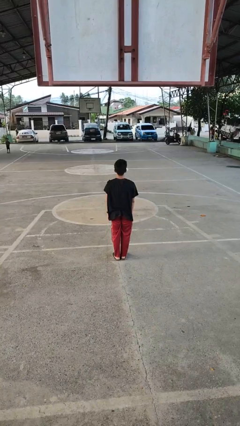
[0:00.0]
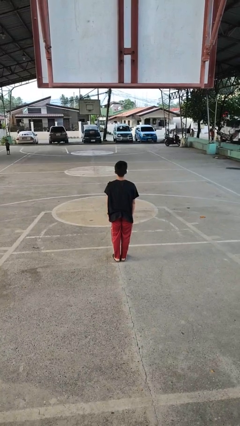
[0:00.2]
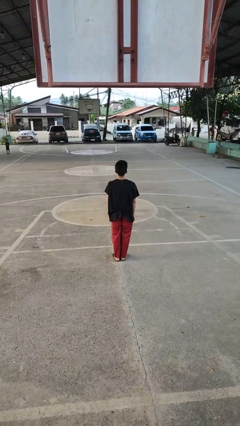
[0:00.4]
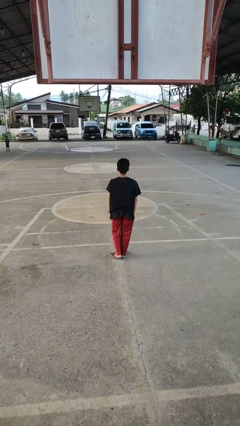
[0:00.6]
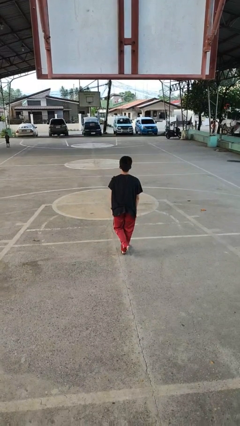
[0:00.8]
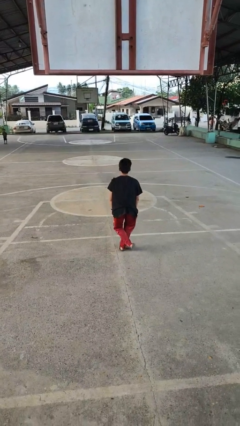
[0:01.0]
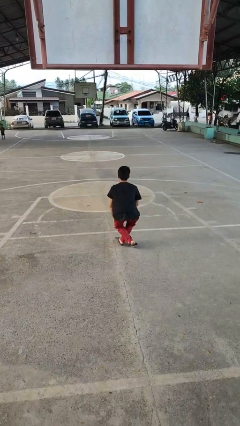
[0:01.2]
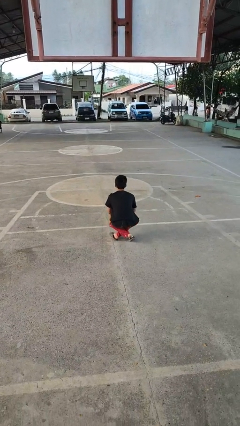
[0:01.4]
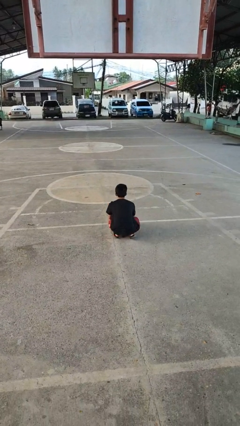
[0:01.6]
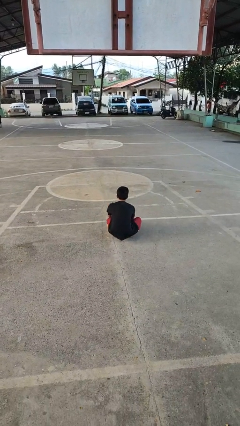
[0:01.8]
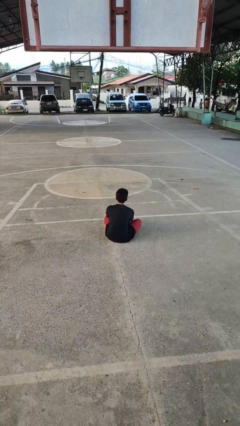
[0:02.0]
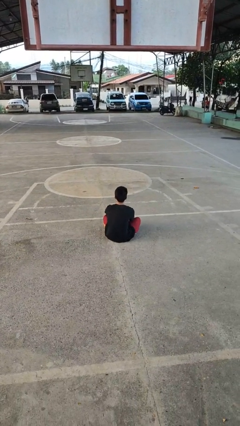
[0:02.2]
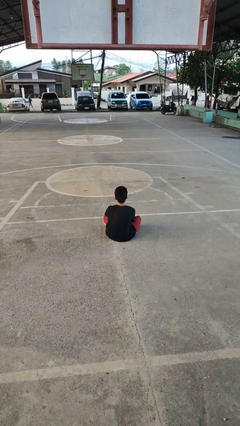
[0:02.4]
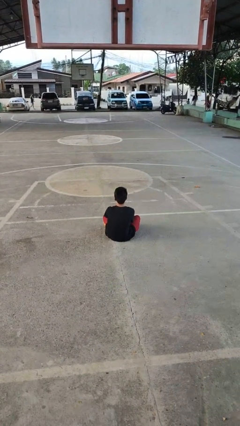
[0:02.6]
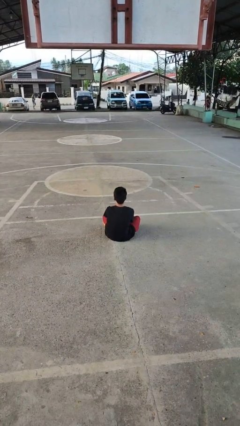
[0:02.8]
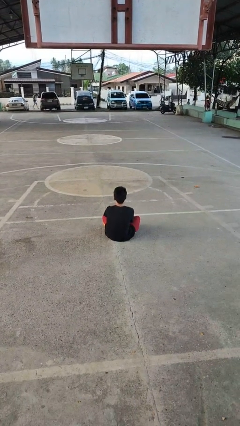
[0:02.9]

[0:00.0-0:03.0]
person sits crisscross

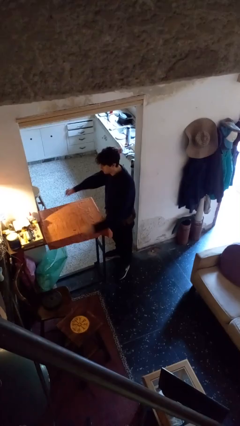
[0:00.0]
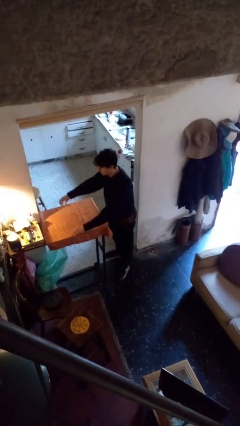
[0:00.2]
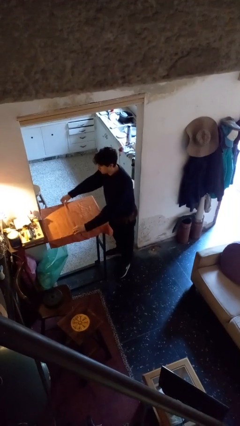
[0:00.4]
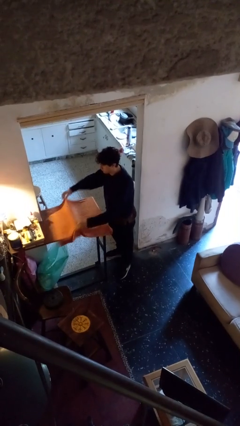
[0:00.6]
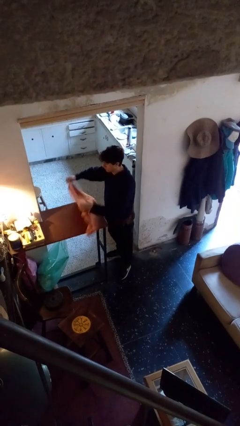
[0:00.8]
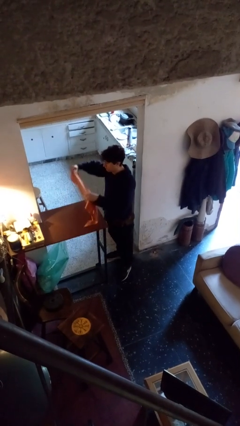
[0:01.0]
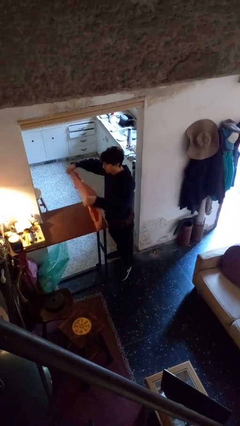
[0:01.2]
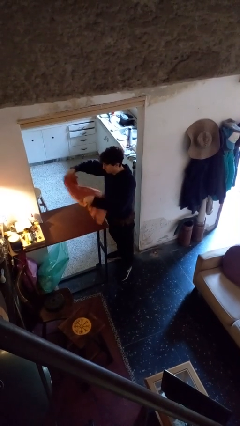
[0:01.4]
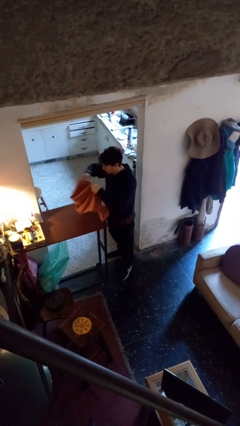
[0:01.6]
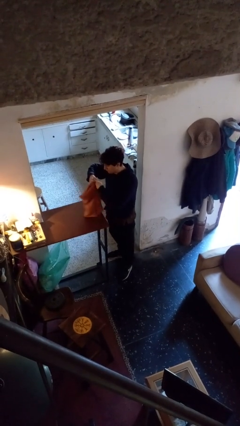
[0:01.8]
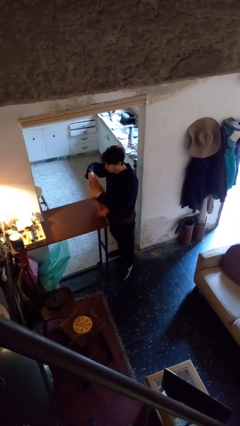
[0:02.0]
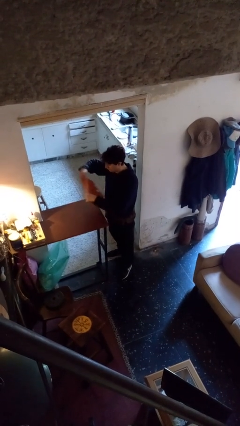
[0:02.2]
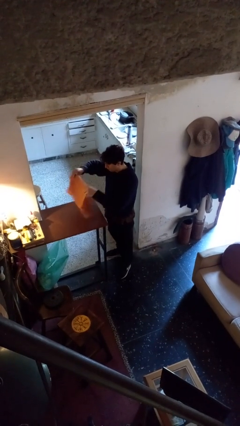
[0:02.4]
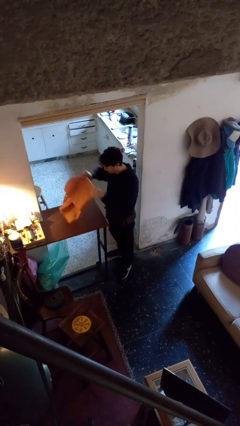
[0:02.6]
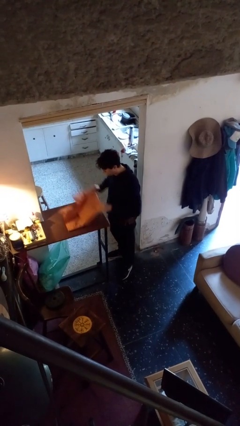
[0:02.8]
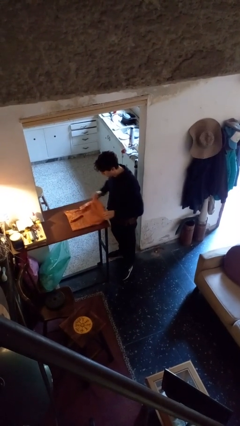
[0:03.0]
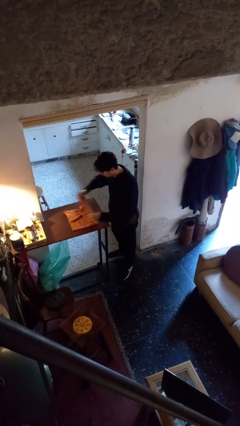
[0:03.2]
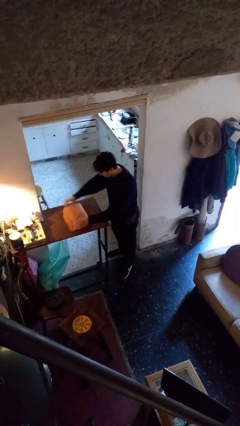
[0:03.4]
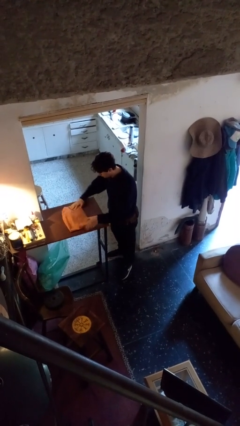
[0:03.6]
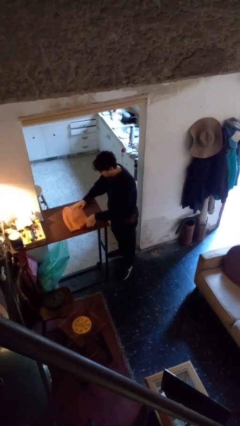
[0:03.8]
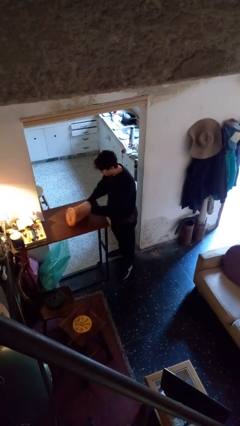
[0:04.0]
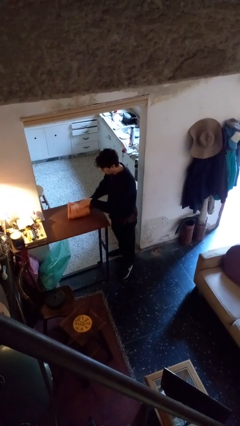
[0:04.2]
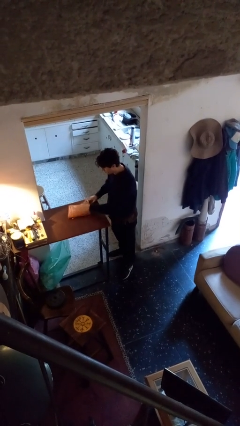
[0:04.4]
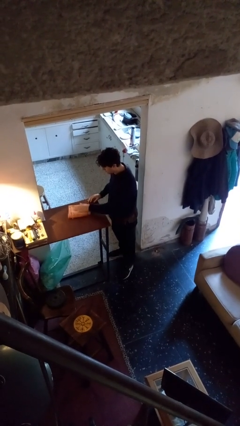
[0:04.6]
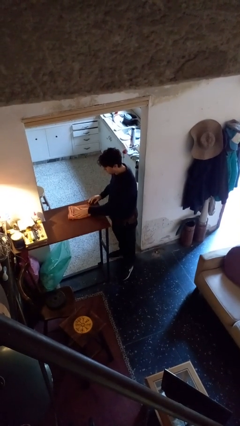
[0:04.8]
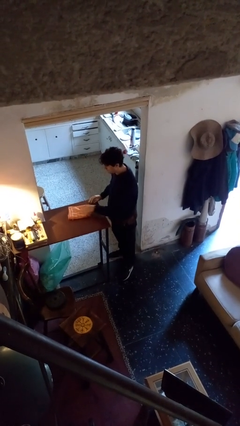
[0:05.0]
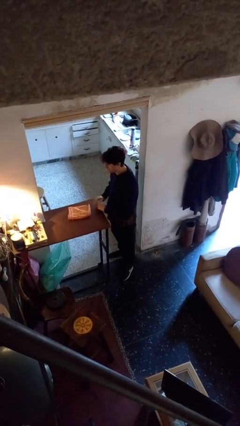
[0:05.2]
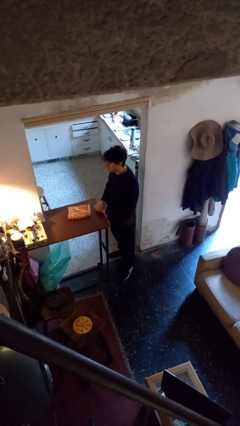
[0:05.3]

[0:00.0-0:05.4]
person folds tablecloth

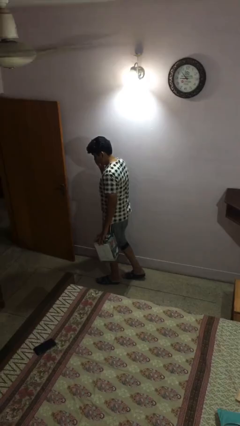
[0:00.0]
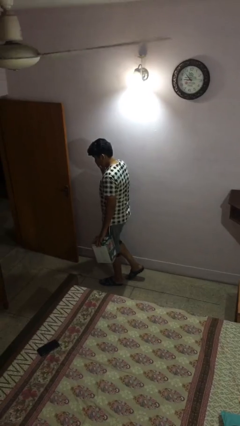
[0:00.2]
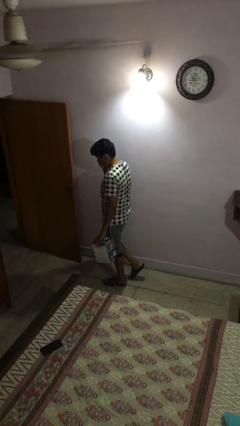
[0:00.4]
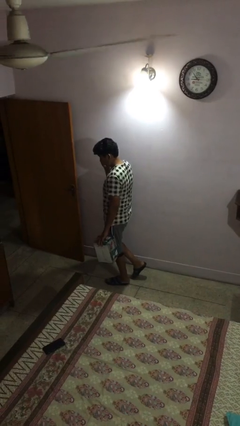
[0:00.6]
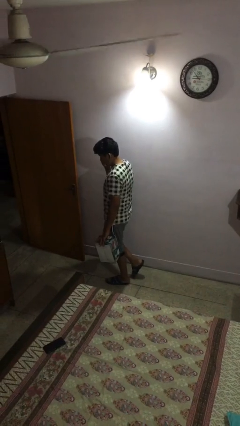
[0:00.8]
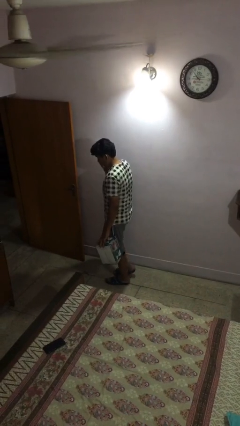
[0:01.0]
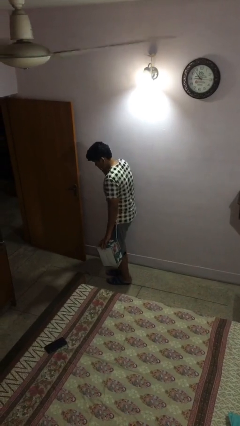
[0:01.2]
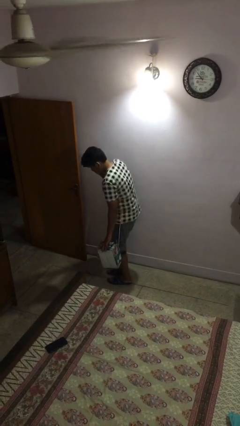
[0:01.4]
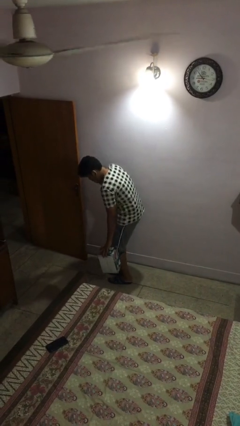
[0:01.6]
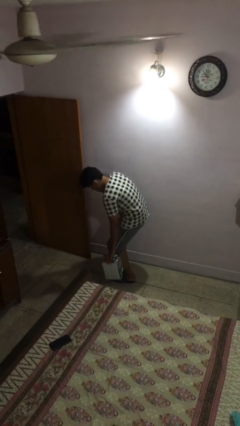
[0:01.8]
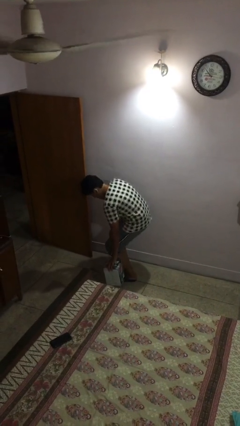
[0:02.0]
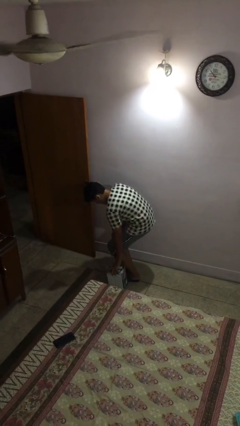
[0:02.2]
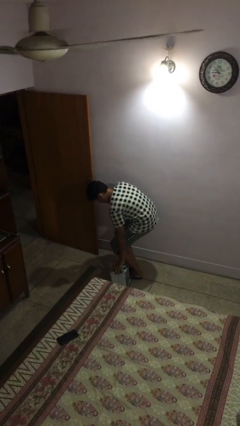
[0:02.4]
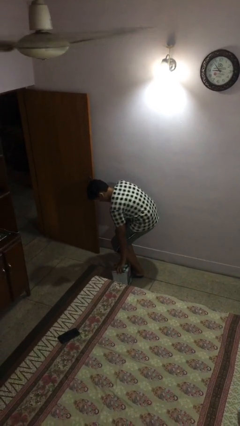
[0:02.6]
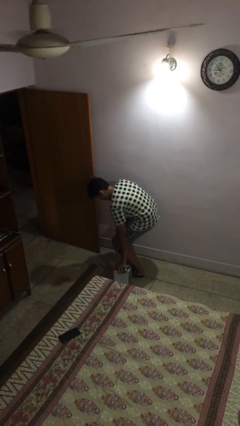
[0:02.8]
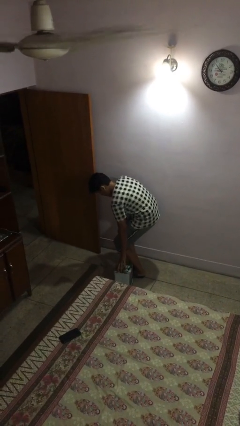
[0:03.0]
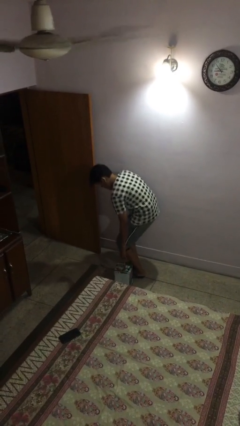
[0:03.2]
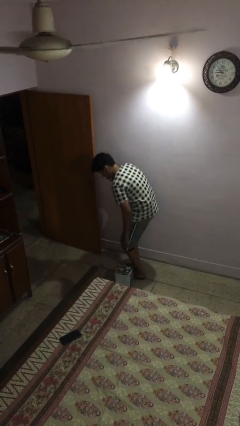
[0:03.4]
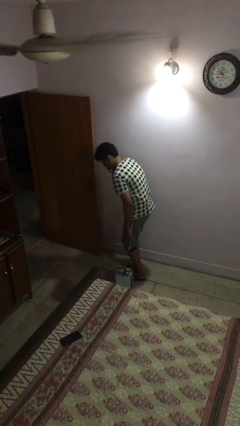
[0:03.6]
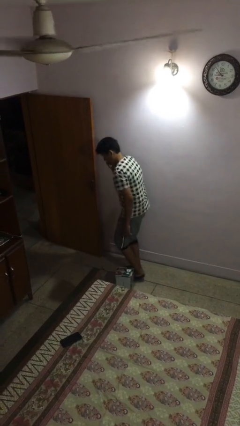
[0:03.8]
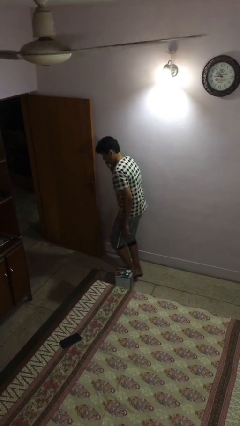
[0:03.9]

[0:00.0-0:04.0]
person puts down object on floor

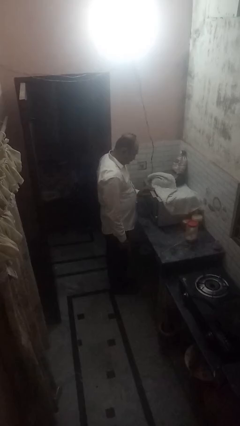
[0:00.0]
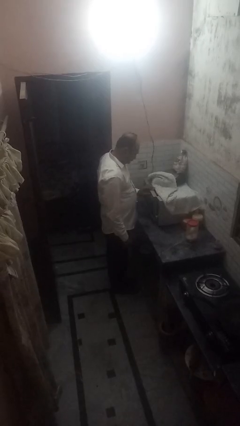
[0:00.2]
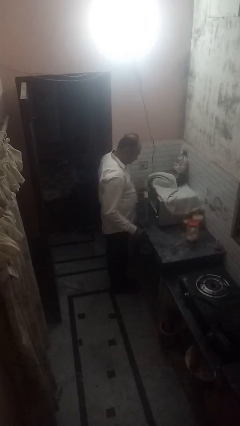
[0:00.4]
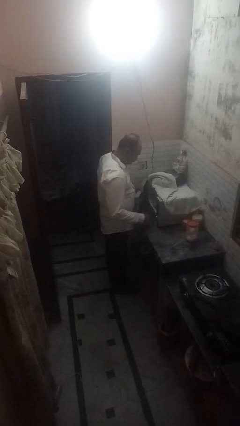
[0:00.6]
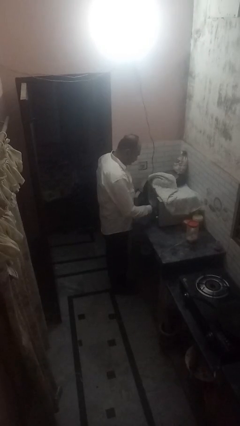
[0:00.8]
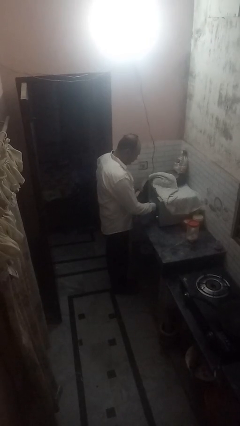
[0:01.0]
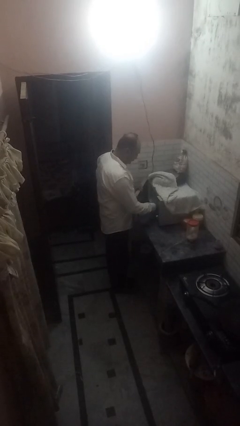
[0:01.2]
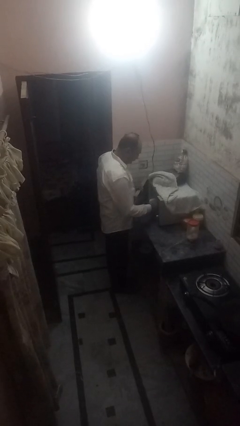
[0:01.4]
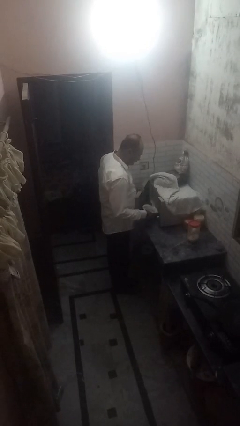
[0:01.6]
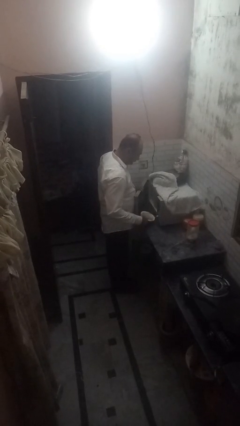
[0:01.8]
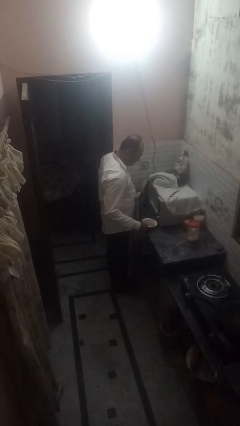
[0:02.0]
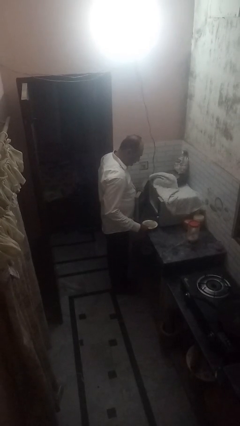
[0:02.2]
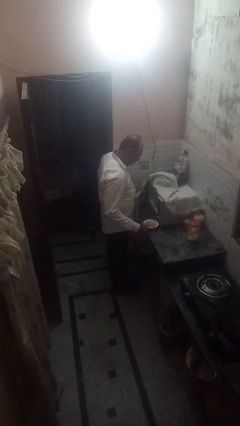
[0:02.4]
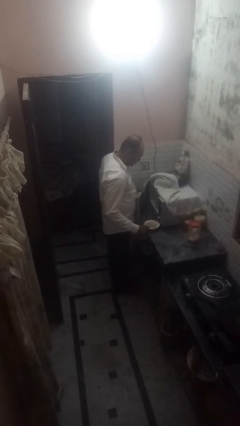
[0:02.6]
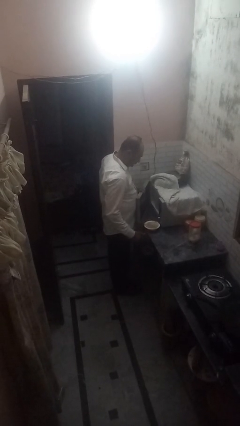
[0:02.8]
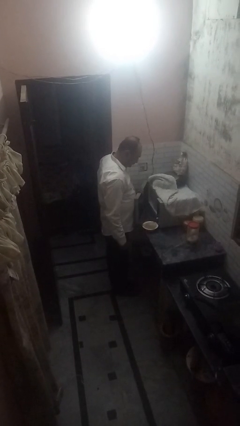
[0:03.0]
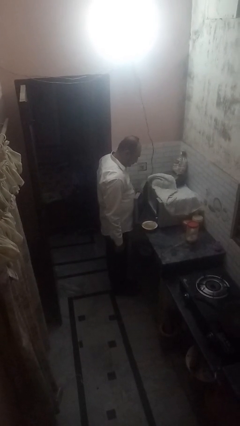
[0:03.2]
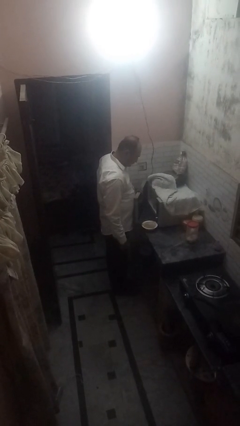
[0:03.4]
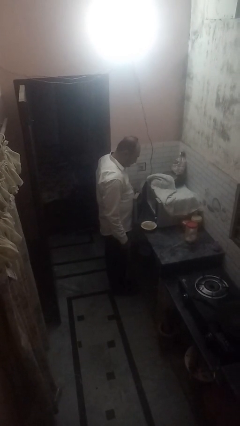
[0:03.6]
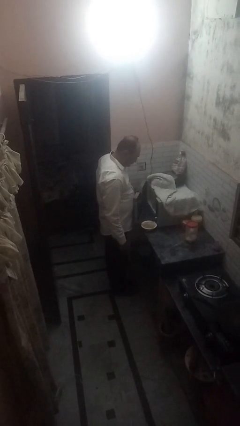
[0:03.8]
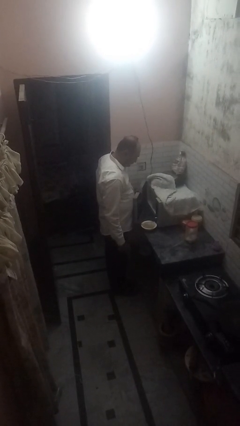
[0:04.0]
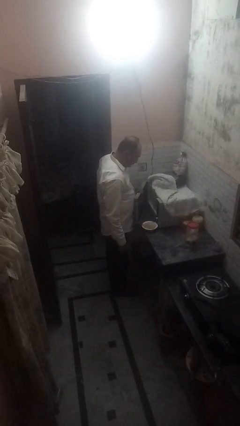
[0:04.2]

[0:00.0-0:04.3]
person takes object from microwave

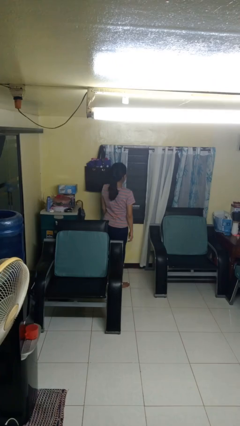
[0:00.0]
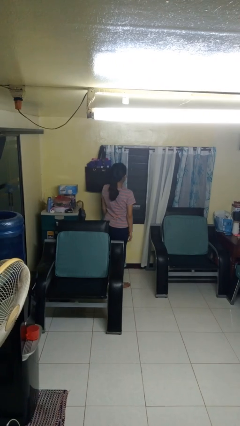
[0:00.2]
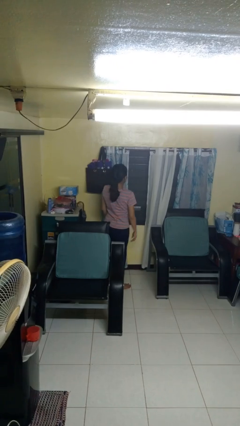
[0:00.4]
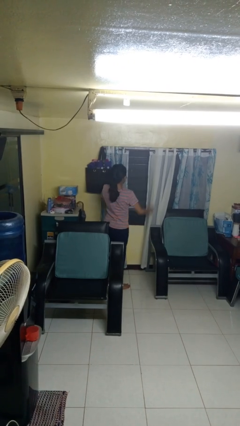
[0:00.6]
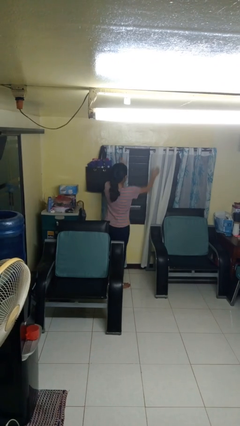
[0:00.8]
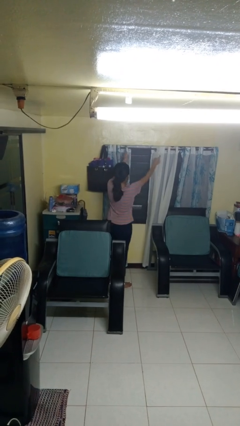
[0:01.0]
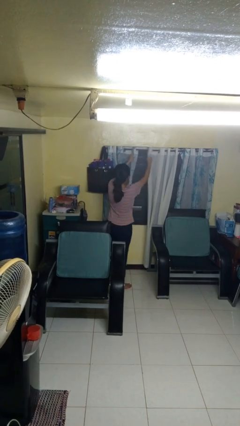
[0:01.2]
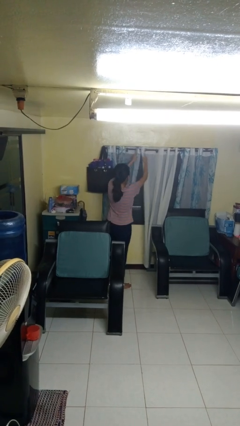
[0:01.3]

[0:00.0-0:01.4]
person closes curtains
